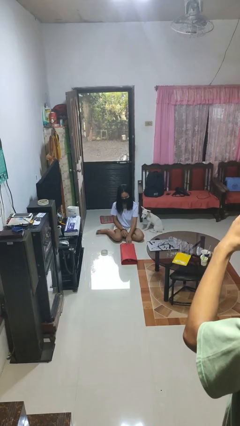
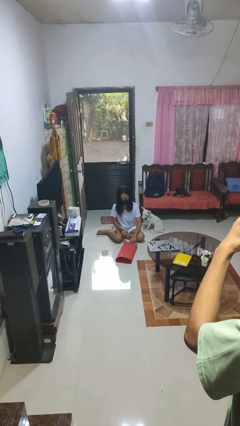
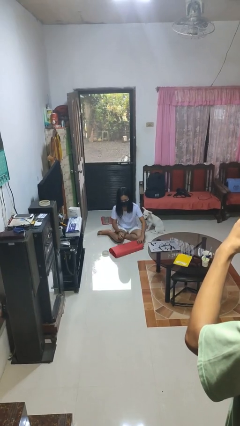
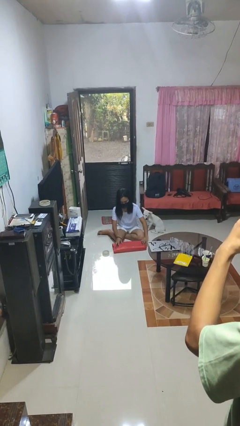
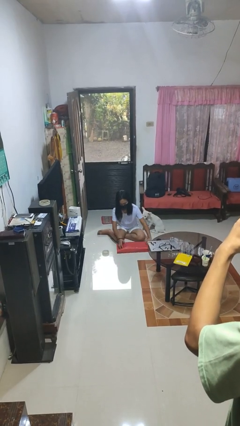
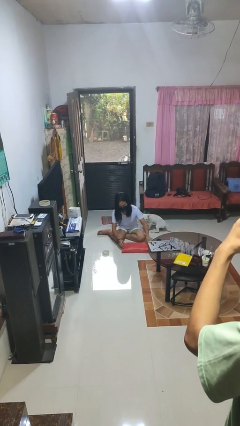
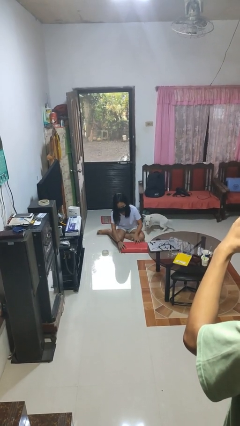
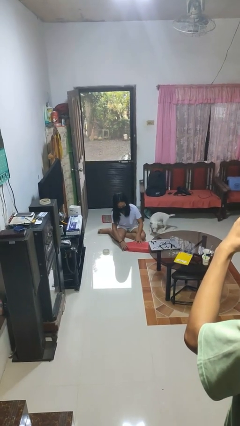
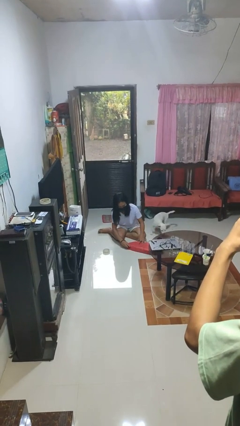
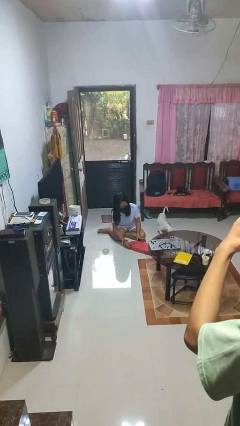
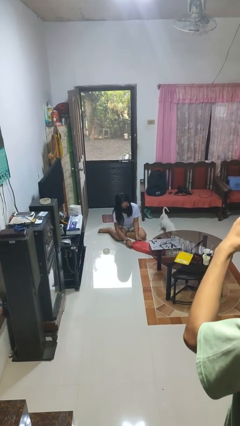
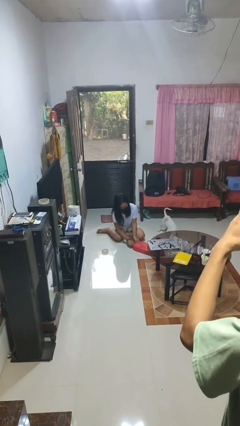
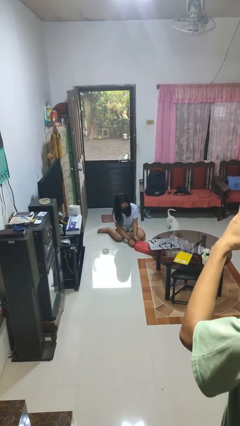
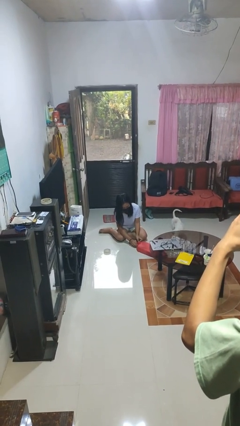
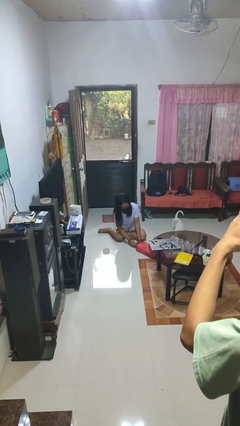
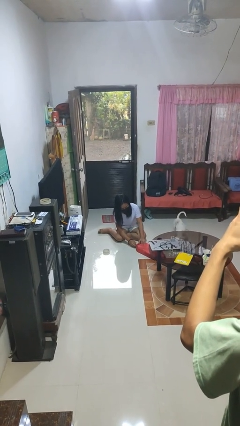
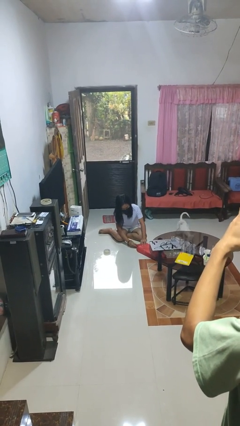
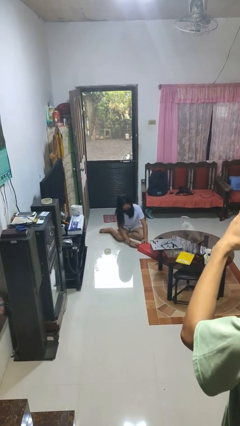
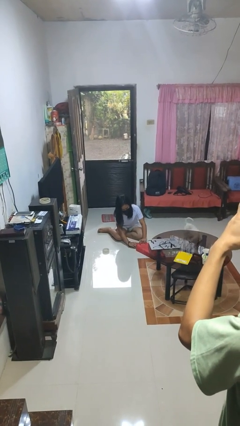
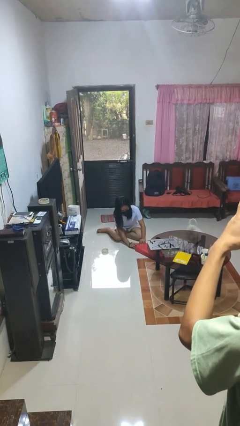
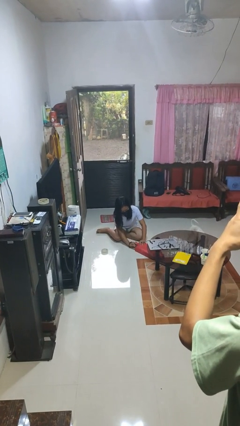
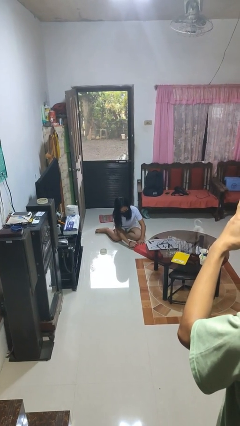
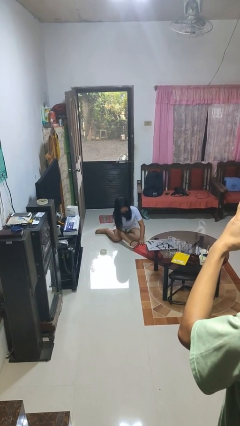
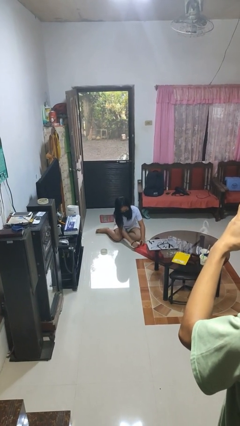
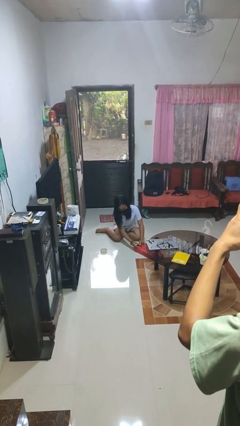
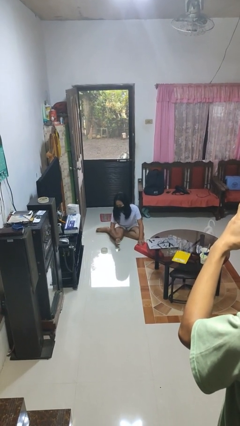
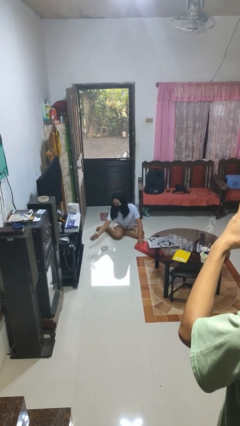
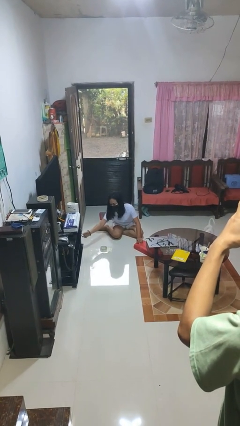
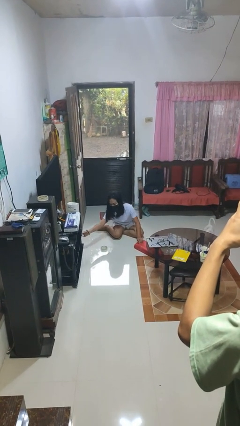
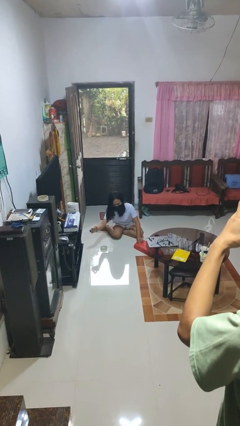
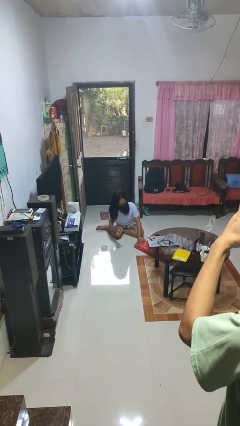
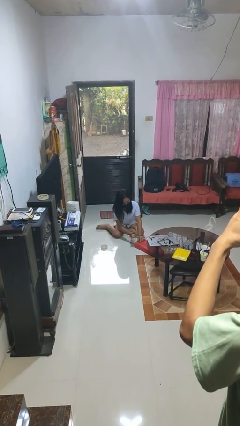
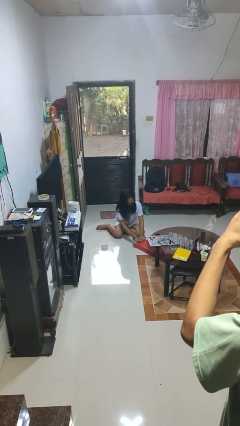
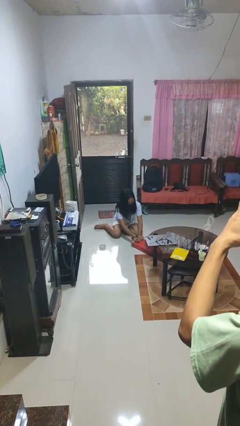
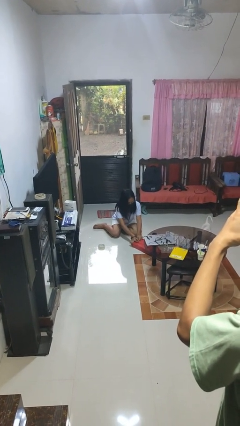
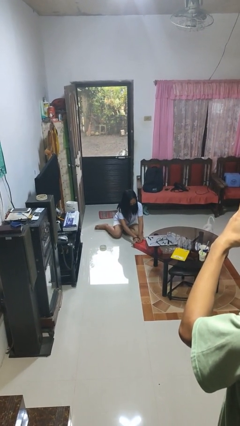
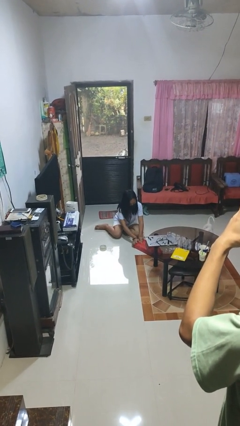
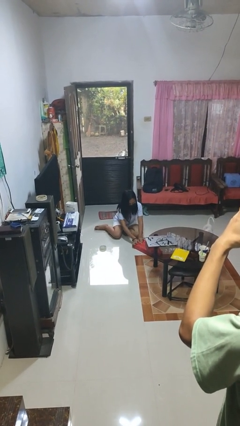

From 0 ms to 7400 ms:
person wraps box

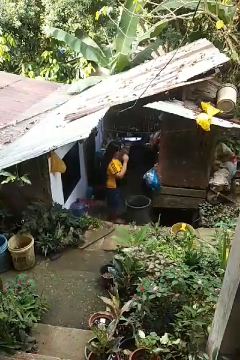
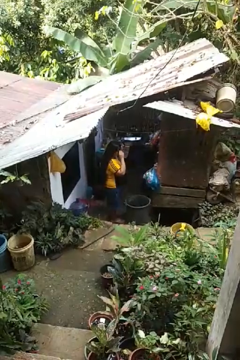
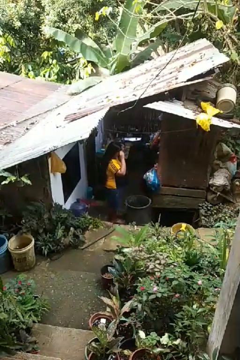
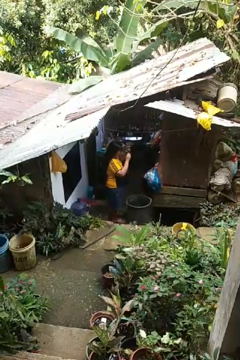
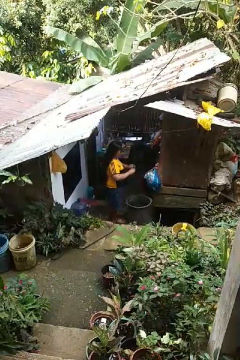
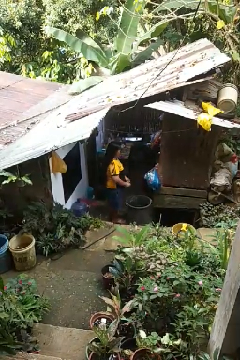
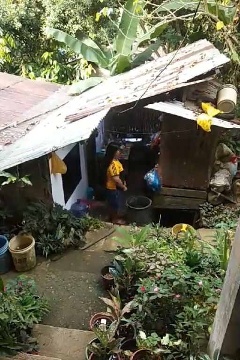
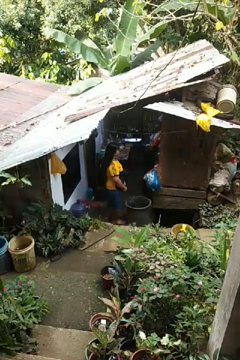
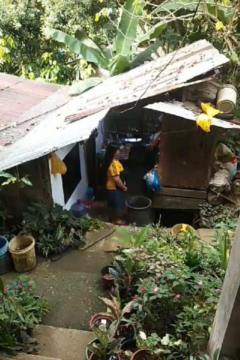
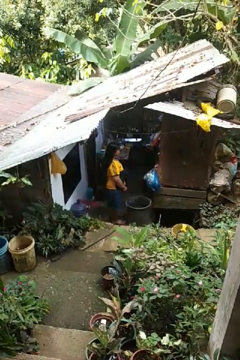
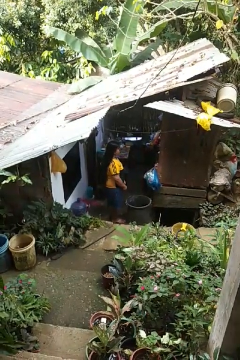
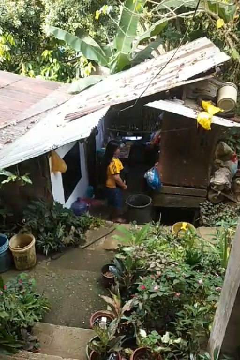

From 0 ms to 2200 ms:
person takes off sunglasses

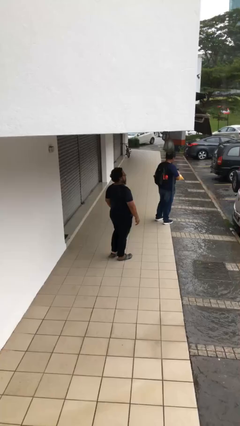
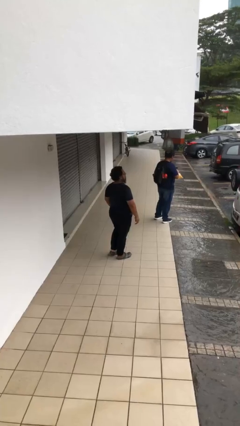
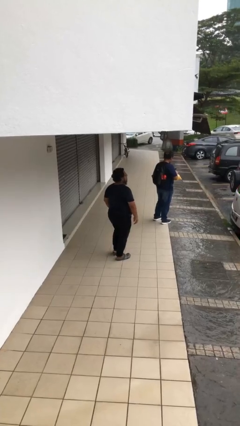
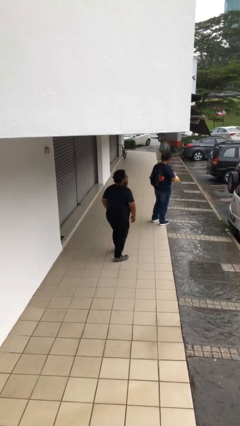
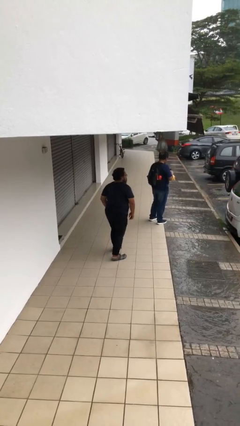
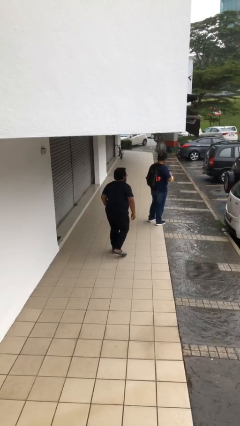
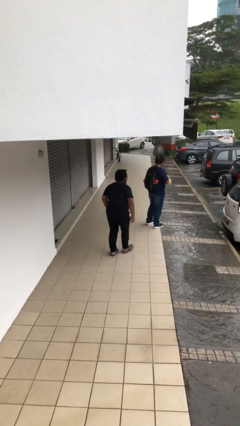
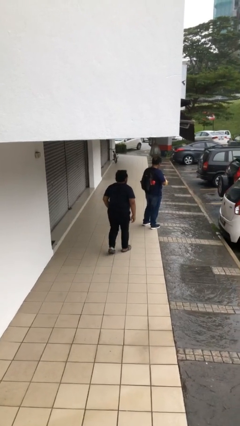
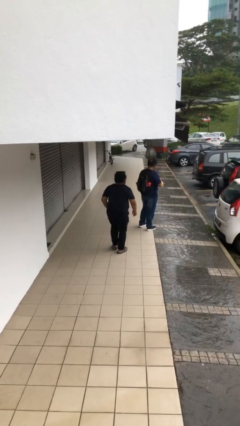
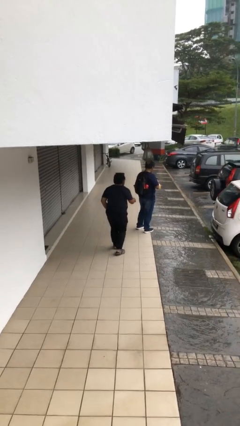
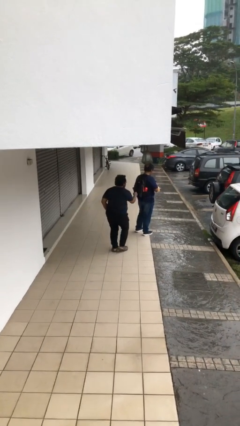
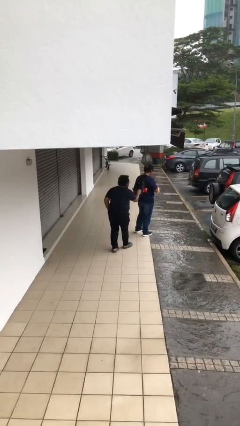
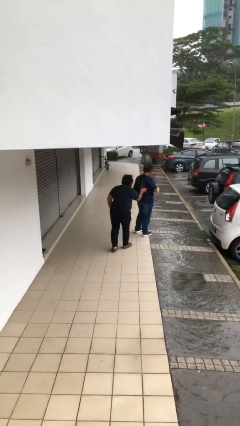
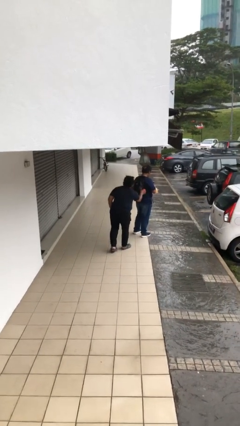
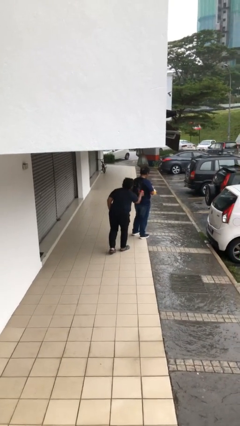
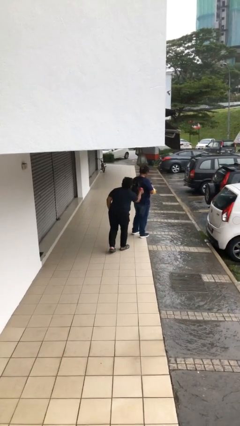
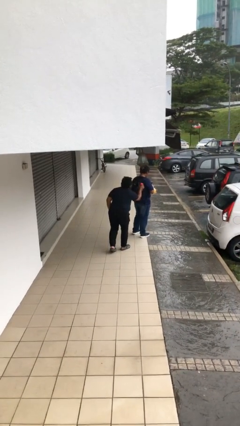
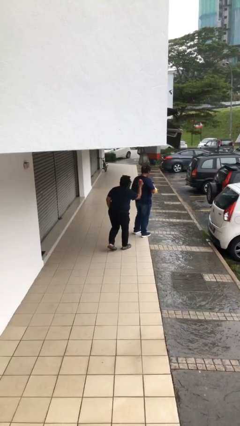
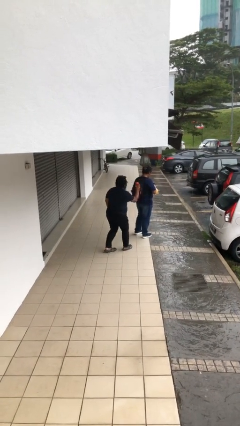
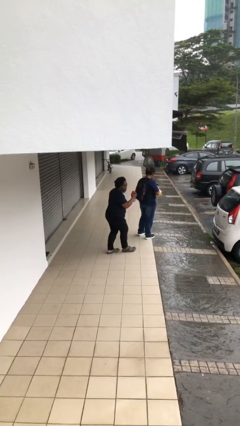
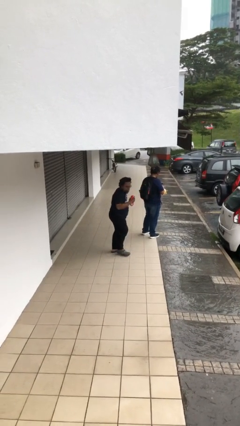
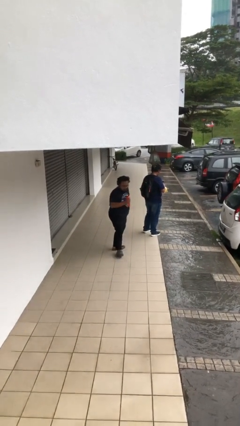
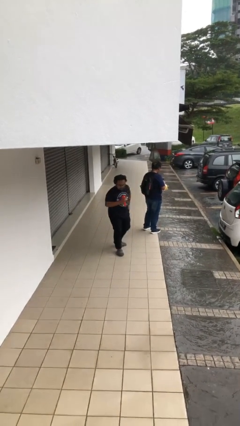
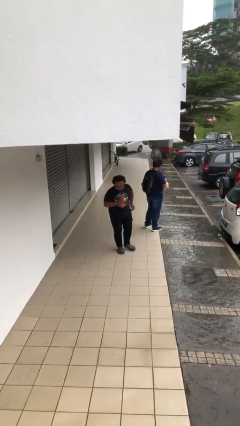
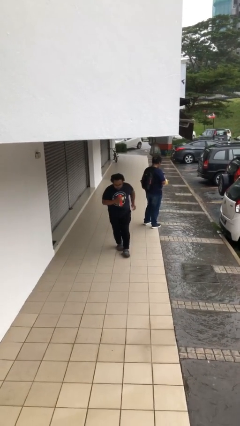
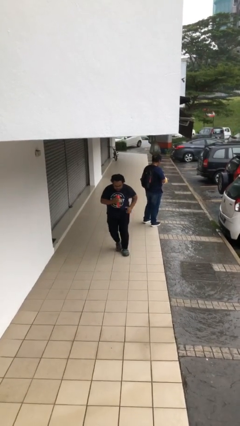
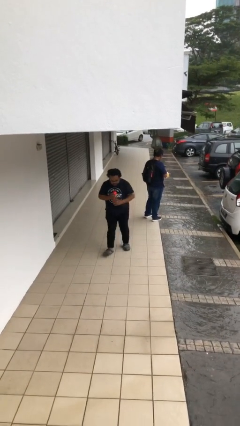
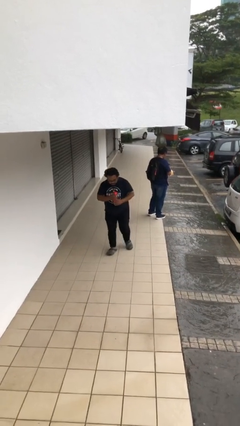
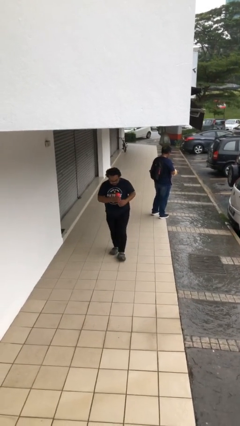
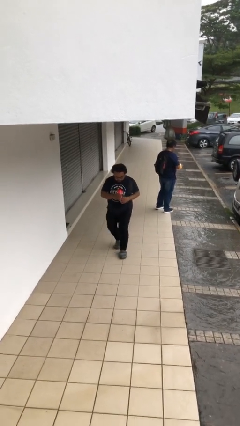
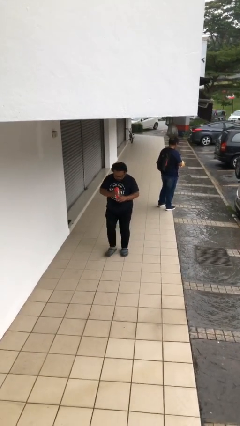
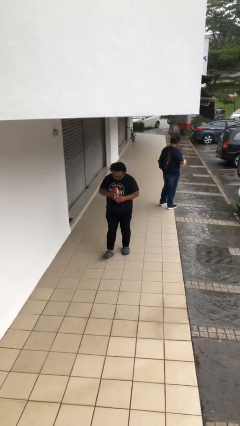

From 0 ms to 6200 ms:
person steals object from person

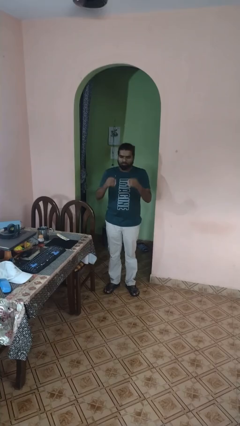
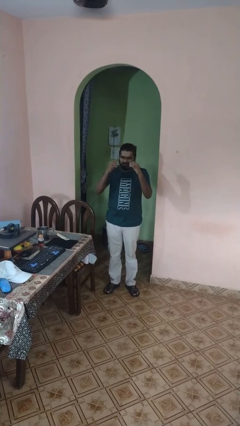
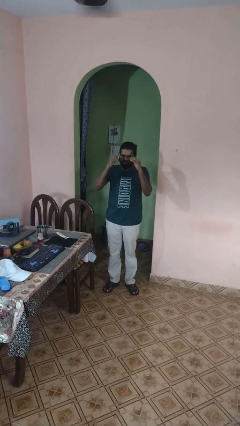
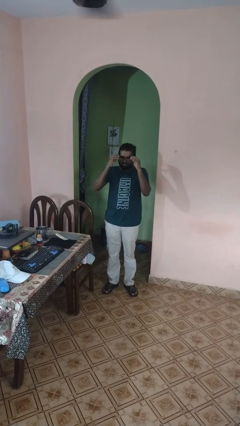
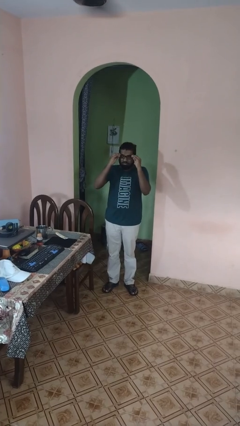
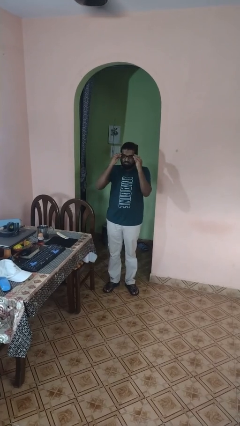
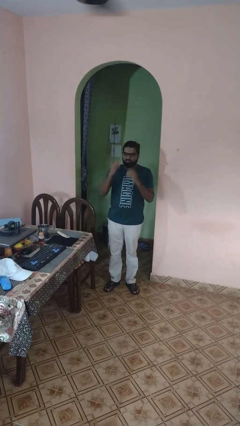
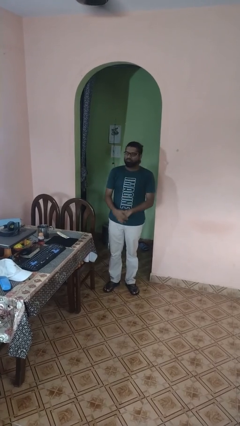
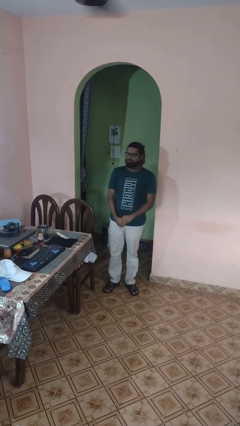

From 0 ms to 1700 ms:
person puts on glasses

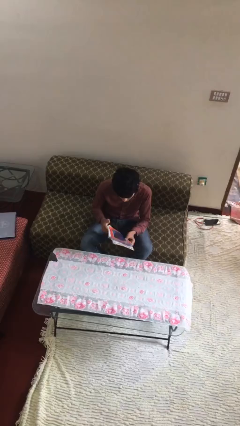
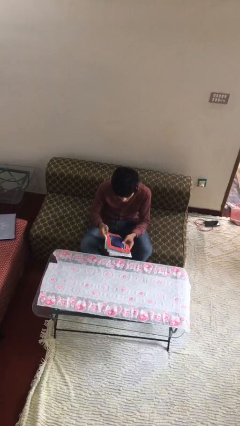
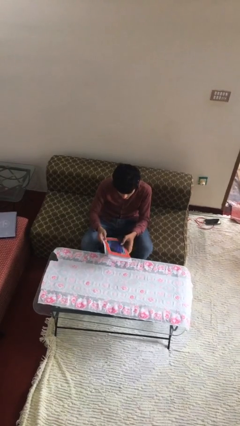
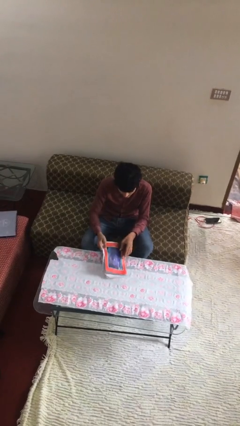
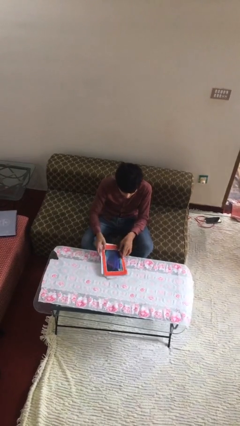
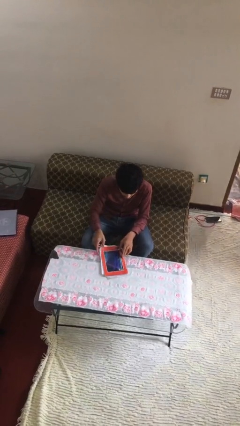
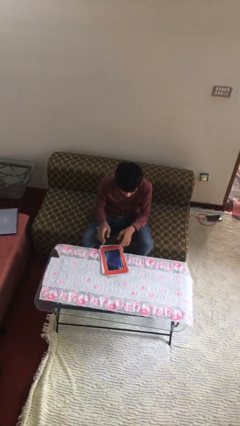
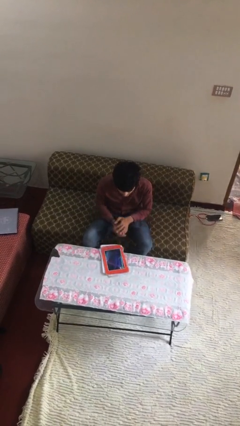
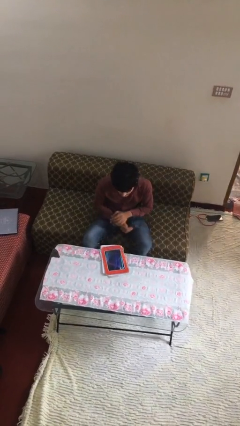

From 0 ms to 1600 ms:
person puts down object on table
